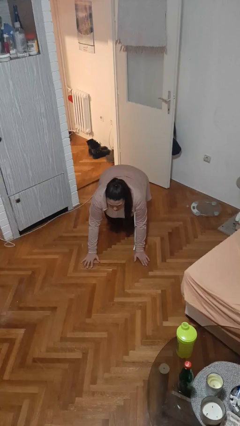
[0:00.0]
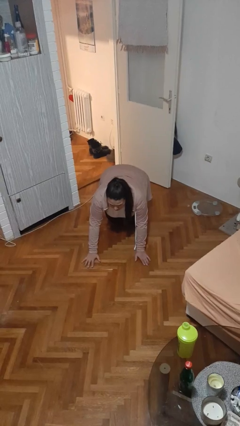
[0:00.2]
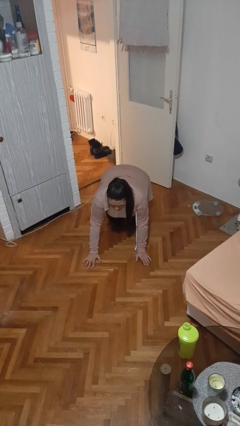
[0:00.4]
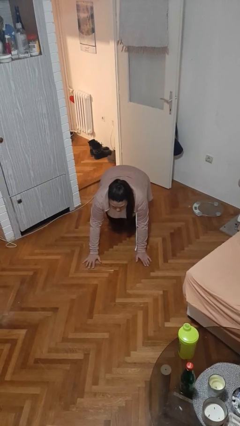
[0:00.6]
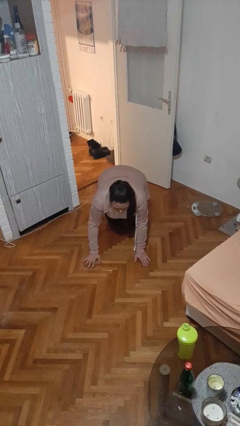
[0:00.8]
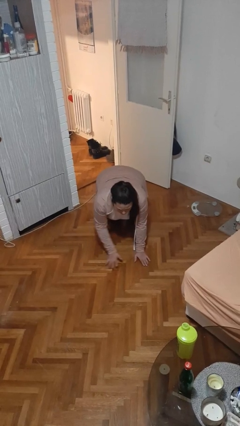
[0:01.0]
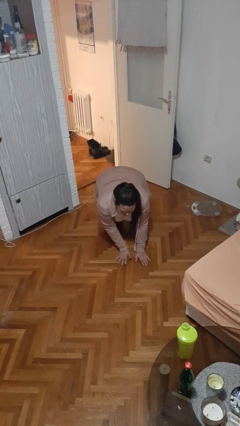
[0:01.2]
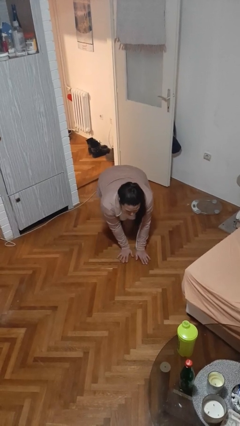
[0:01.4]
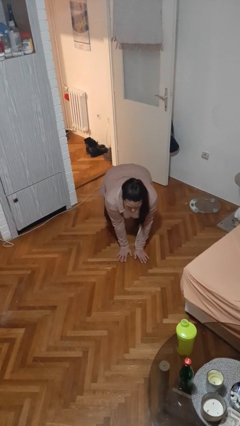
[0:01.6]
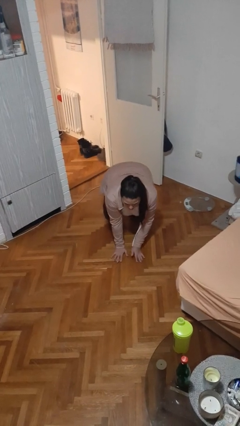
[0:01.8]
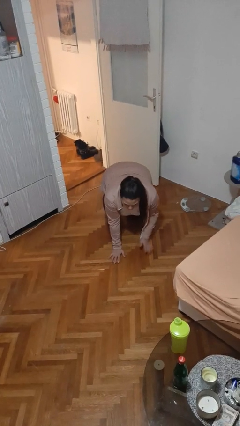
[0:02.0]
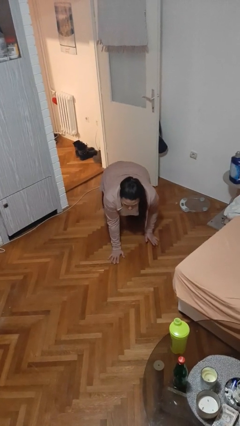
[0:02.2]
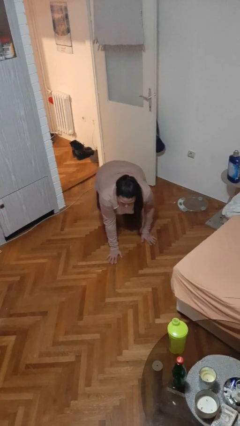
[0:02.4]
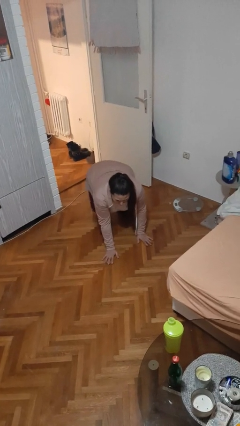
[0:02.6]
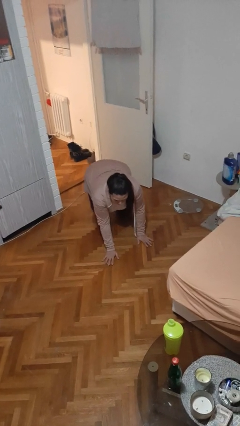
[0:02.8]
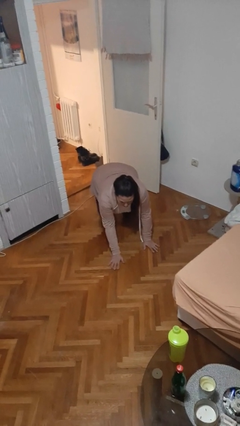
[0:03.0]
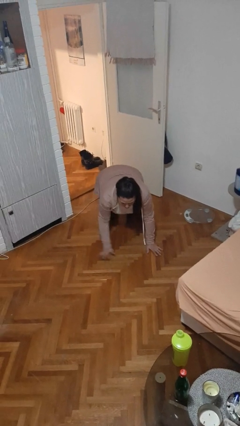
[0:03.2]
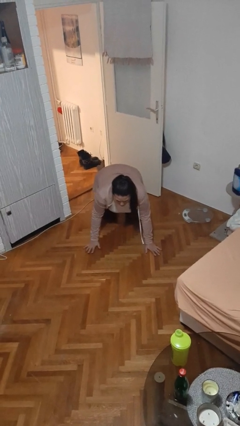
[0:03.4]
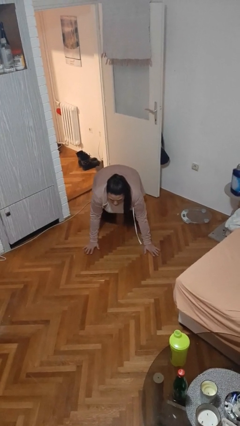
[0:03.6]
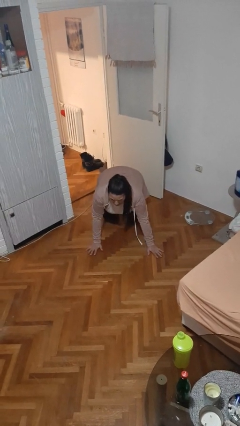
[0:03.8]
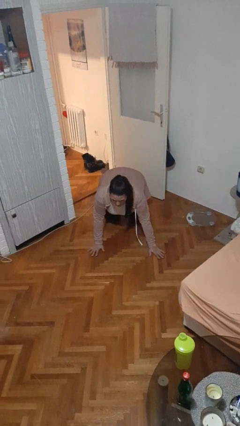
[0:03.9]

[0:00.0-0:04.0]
person crawls

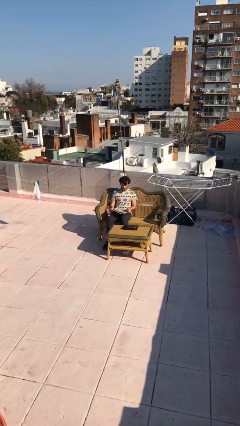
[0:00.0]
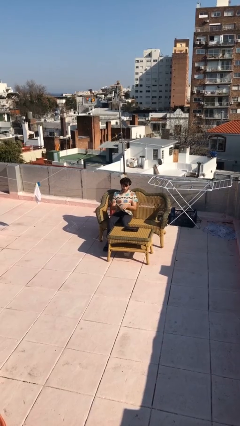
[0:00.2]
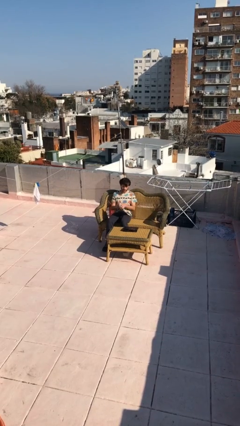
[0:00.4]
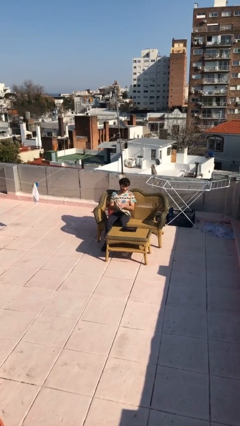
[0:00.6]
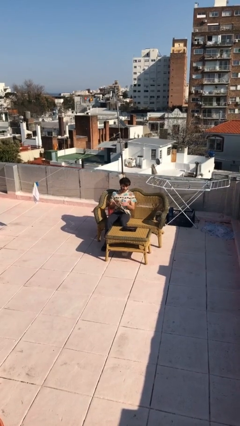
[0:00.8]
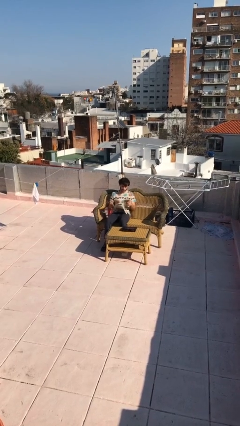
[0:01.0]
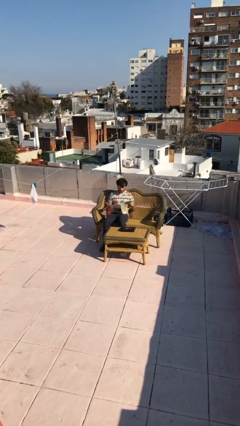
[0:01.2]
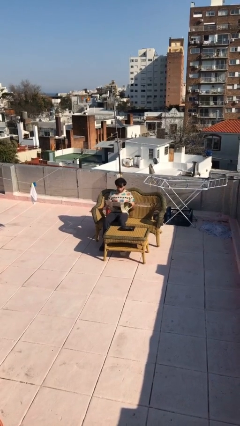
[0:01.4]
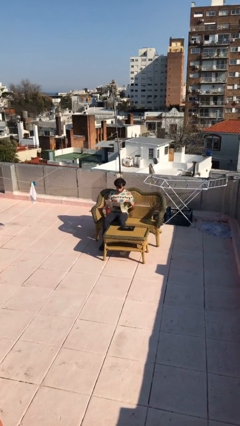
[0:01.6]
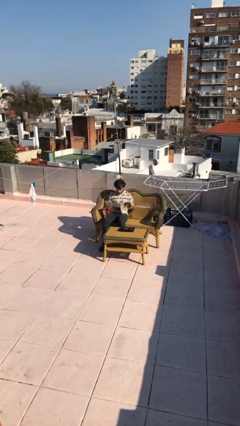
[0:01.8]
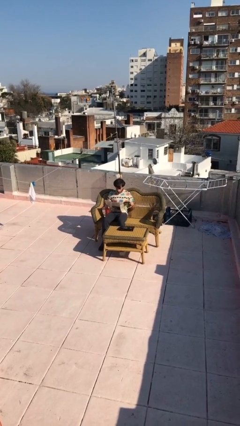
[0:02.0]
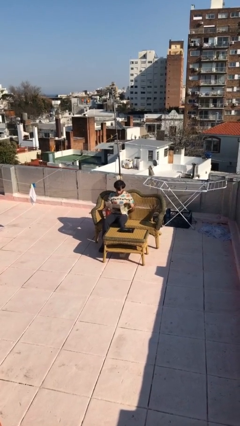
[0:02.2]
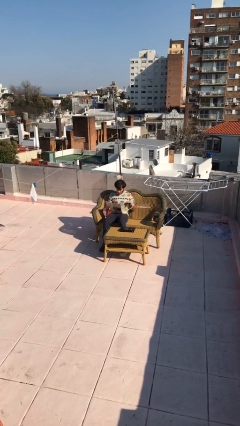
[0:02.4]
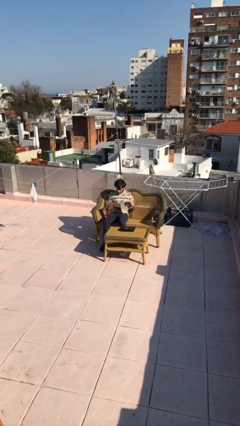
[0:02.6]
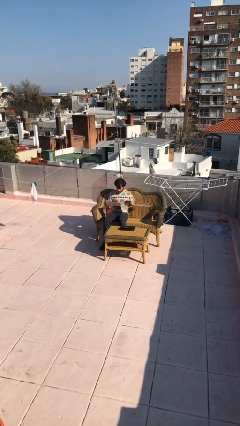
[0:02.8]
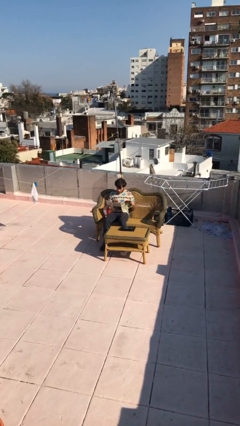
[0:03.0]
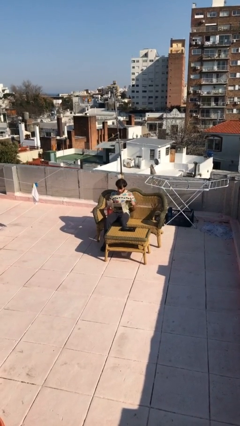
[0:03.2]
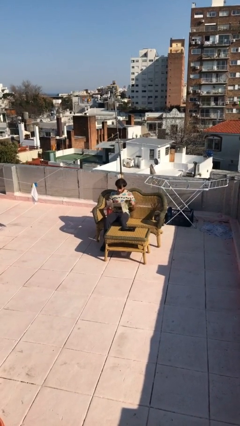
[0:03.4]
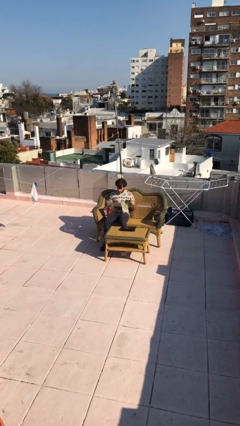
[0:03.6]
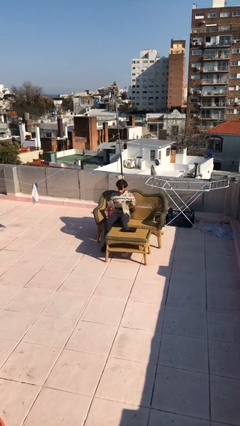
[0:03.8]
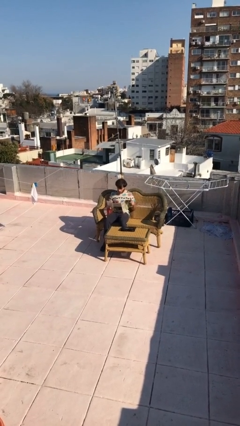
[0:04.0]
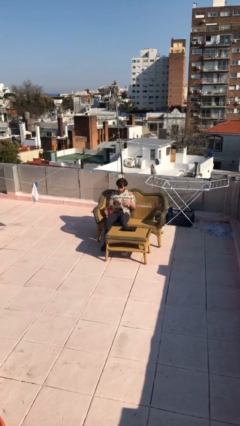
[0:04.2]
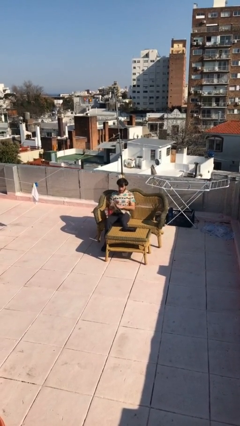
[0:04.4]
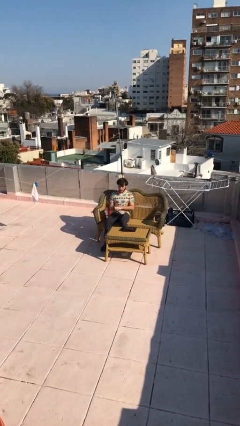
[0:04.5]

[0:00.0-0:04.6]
person reads newspaper

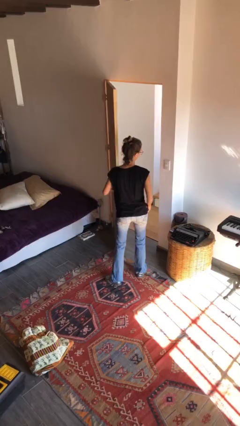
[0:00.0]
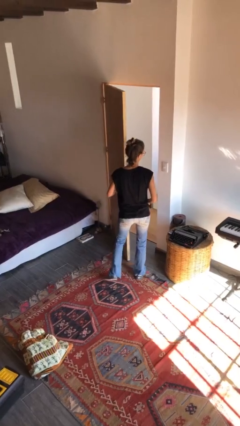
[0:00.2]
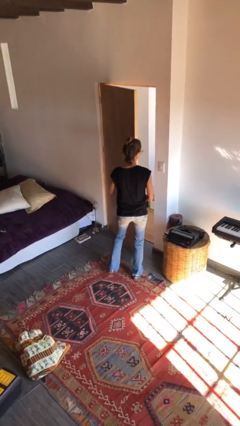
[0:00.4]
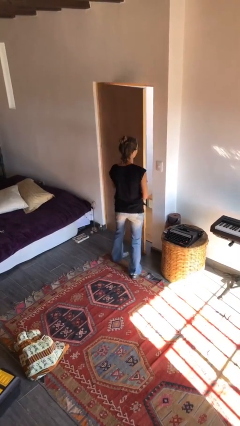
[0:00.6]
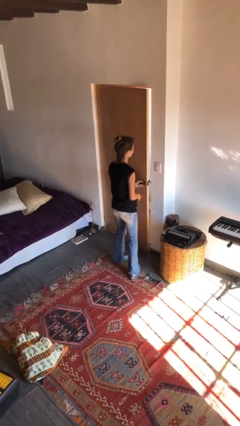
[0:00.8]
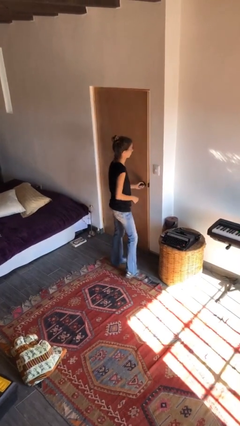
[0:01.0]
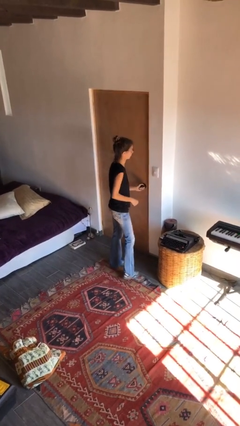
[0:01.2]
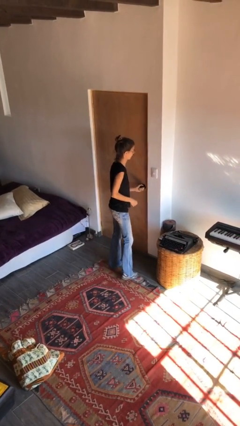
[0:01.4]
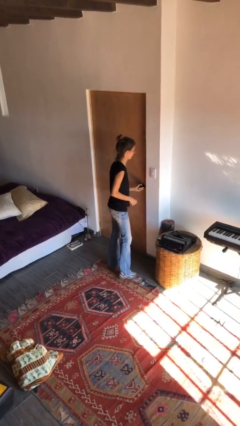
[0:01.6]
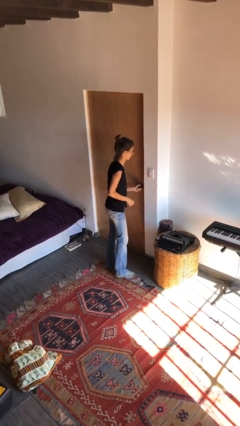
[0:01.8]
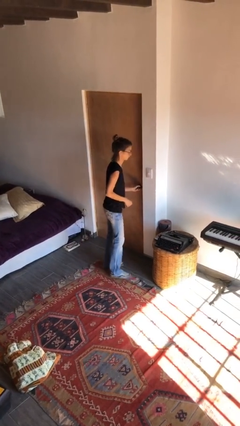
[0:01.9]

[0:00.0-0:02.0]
person closes facility door

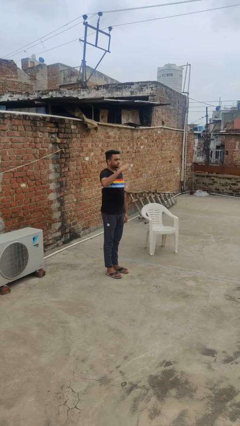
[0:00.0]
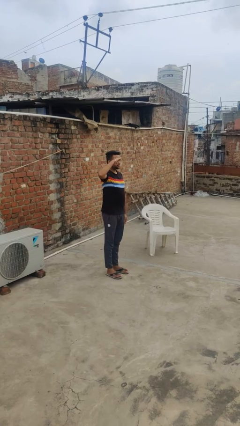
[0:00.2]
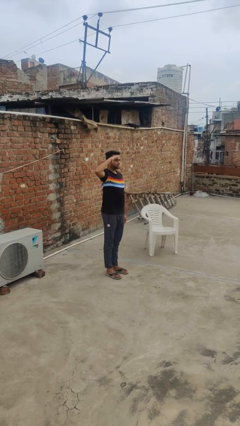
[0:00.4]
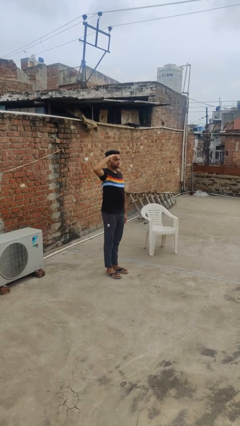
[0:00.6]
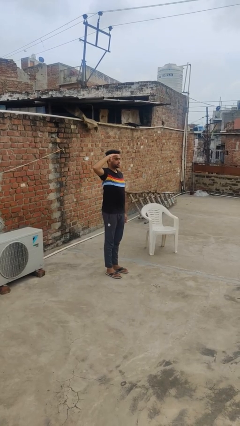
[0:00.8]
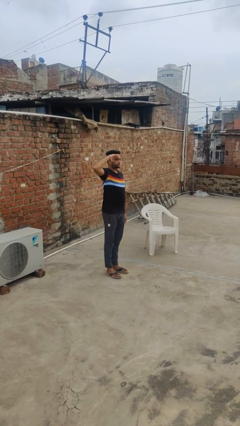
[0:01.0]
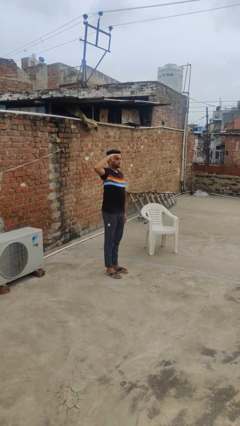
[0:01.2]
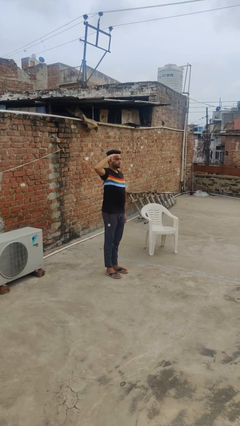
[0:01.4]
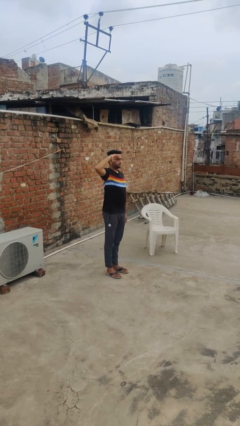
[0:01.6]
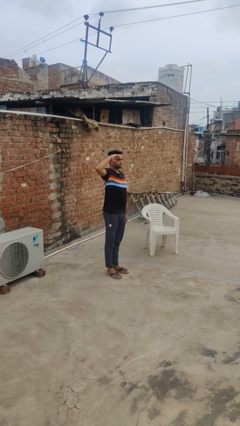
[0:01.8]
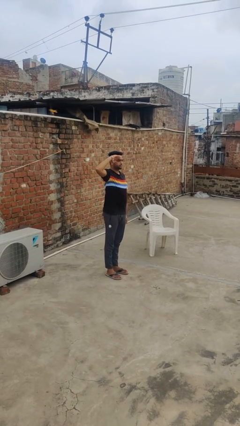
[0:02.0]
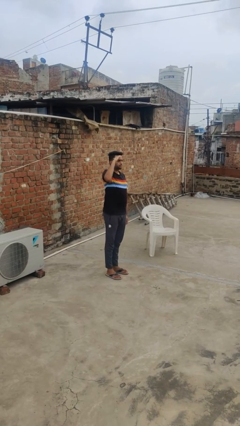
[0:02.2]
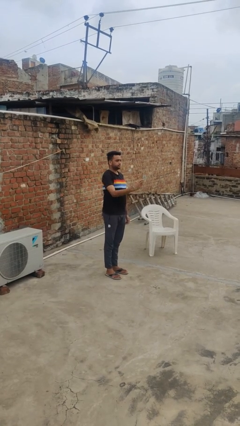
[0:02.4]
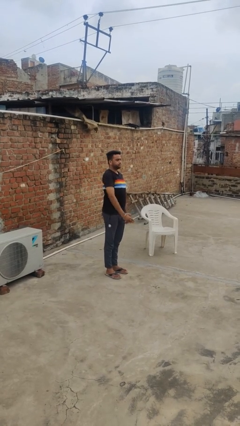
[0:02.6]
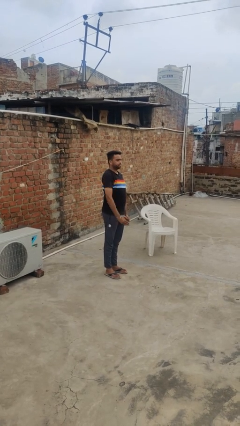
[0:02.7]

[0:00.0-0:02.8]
person salutes

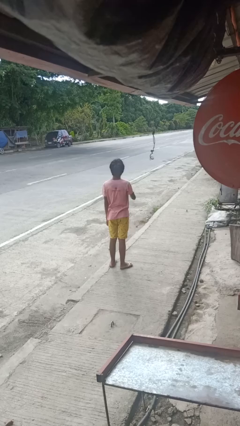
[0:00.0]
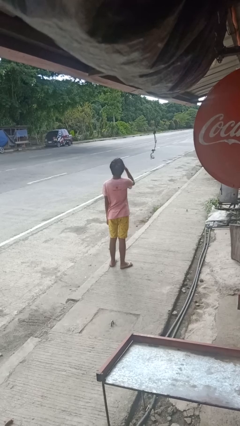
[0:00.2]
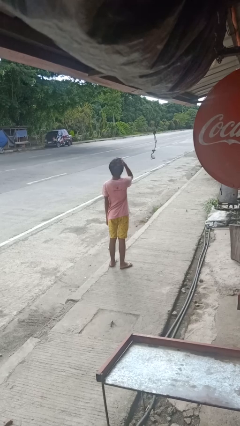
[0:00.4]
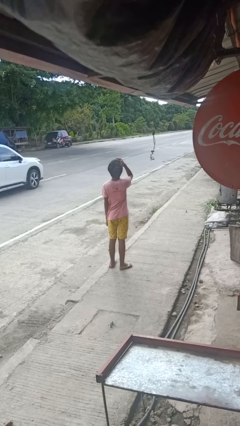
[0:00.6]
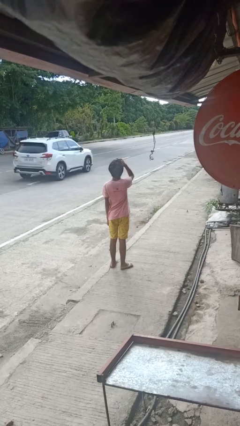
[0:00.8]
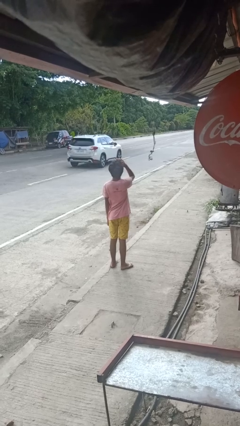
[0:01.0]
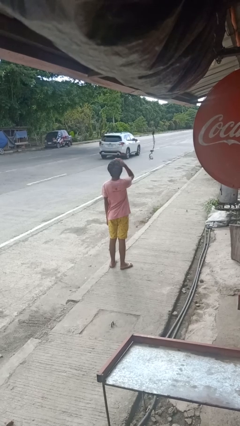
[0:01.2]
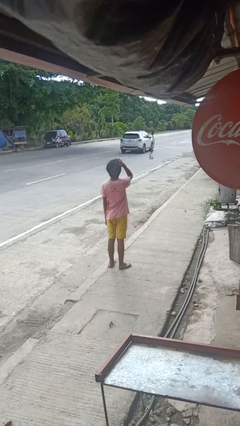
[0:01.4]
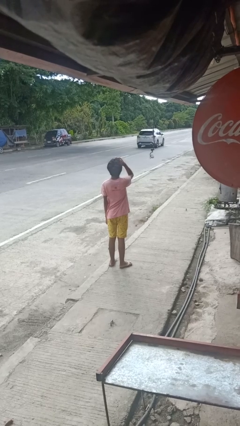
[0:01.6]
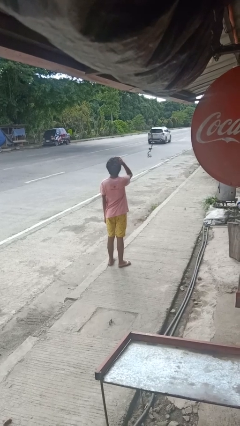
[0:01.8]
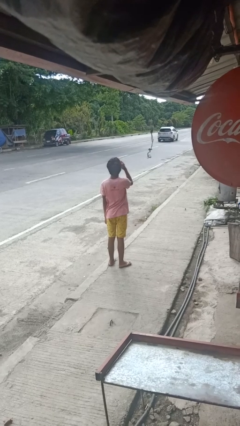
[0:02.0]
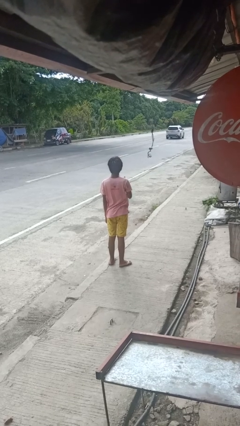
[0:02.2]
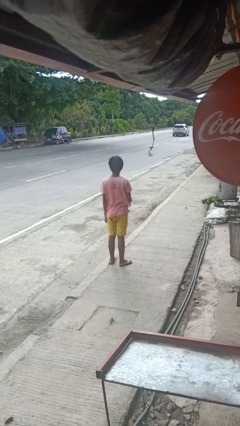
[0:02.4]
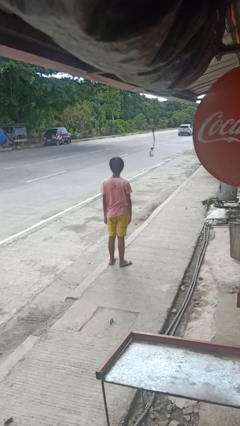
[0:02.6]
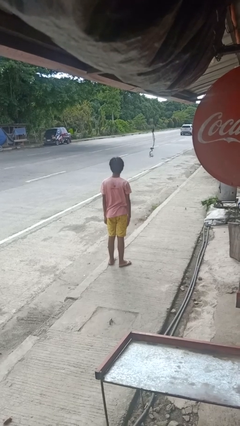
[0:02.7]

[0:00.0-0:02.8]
person shades eyes

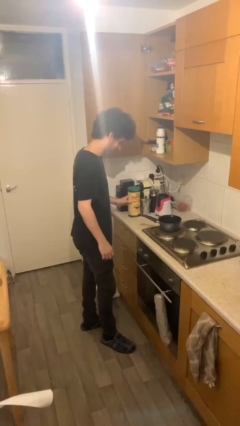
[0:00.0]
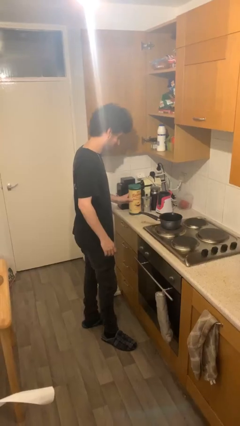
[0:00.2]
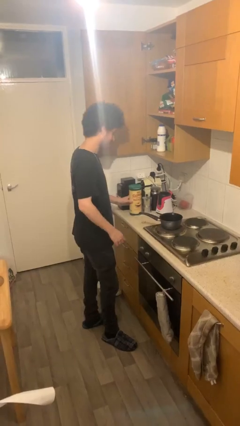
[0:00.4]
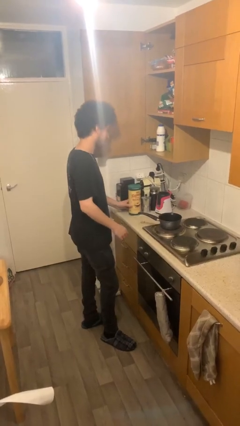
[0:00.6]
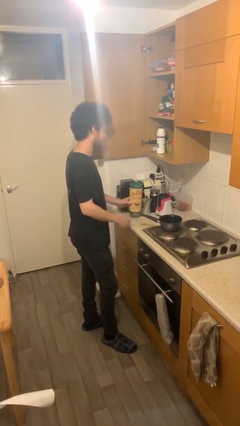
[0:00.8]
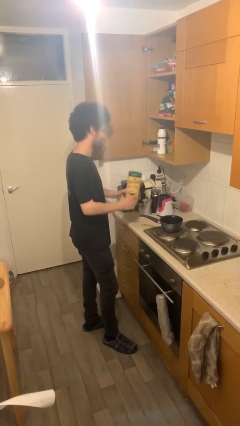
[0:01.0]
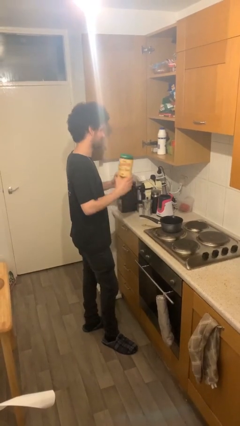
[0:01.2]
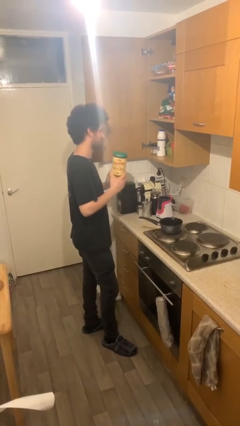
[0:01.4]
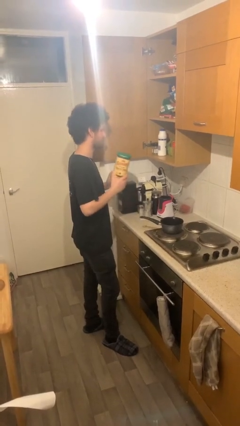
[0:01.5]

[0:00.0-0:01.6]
person picks up object from table
